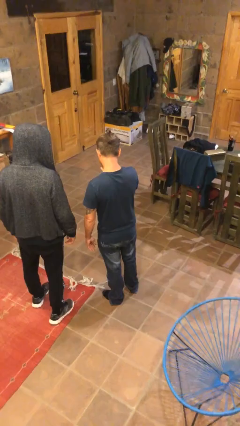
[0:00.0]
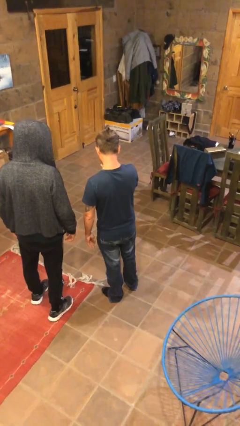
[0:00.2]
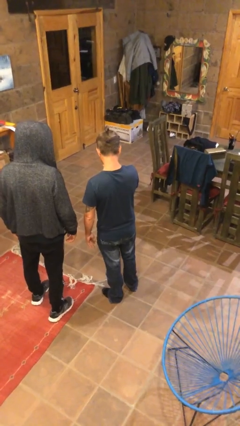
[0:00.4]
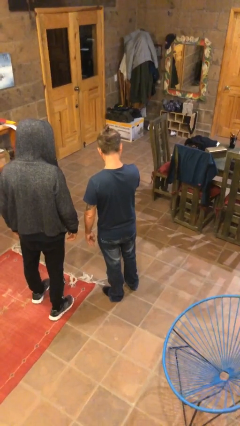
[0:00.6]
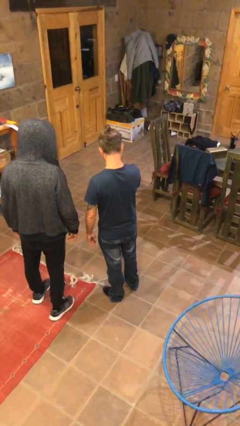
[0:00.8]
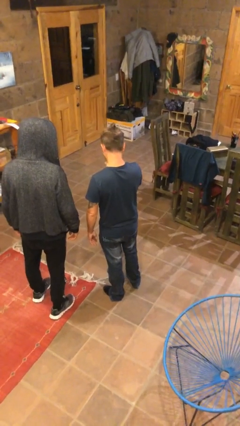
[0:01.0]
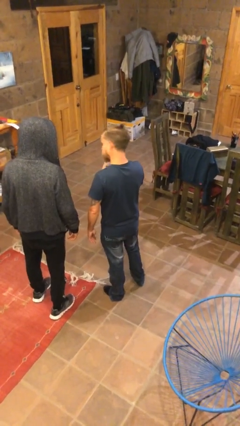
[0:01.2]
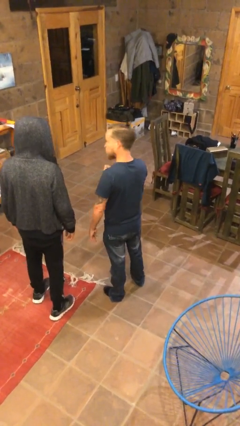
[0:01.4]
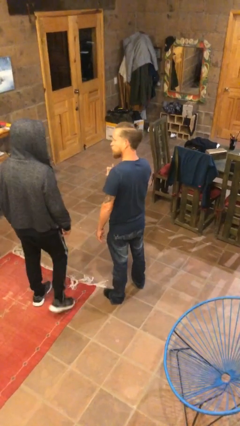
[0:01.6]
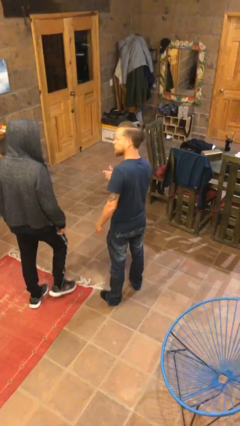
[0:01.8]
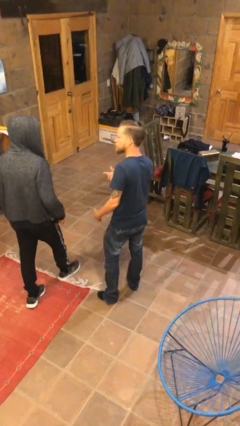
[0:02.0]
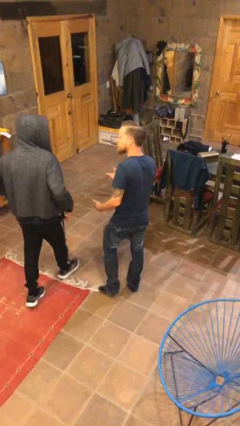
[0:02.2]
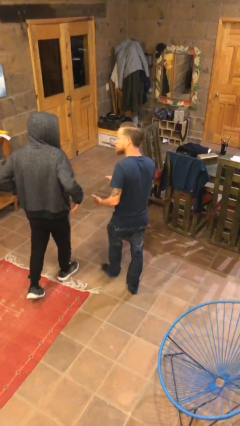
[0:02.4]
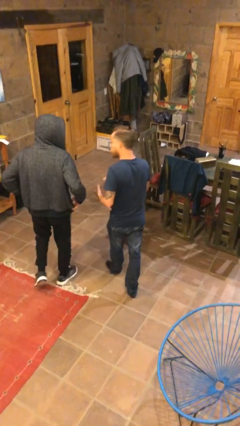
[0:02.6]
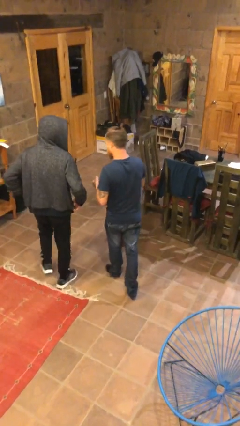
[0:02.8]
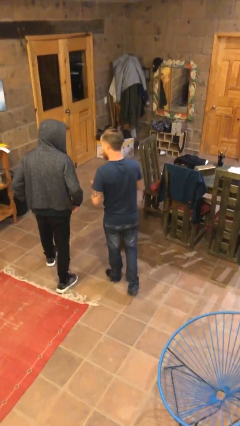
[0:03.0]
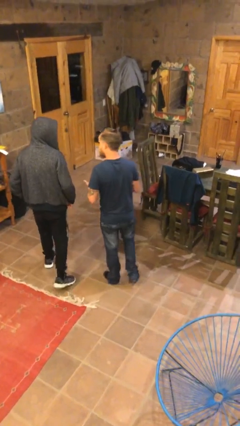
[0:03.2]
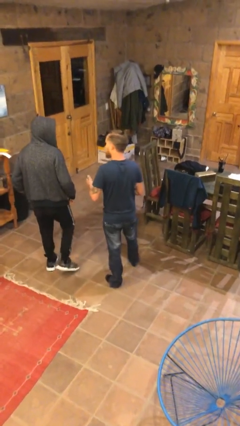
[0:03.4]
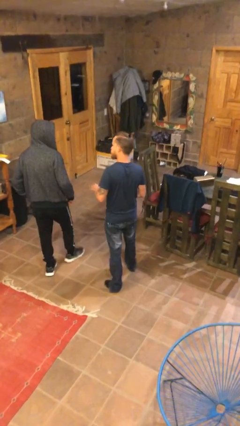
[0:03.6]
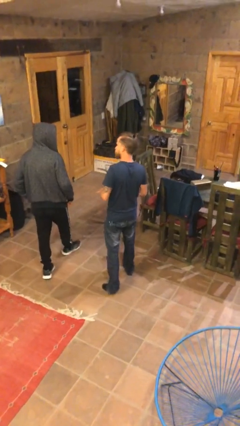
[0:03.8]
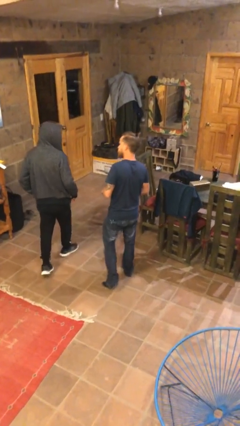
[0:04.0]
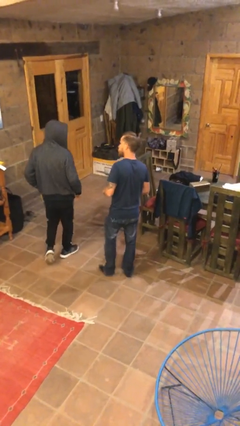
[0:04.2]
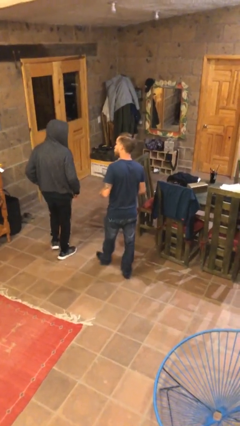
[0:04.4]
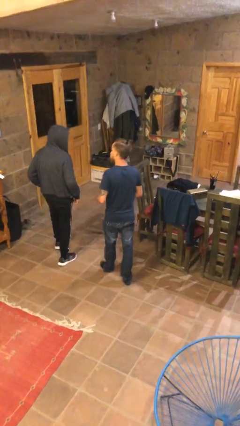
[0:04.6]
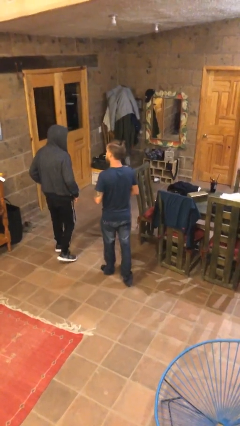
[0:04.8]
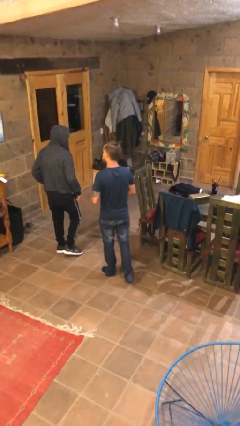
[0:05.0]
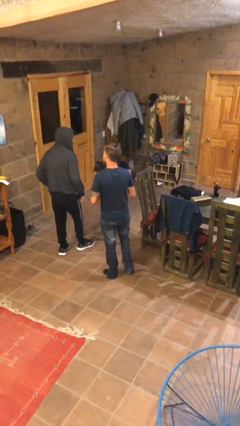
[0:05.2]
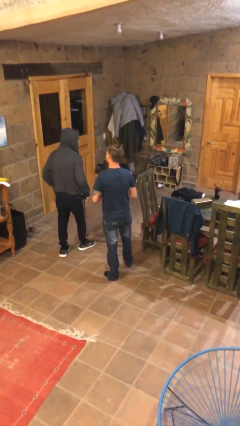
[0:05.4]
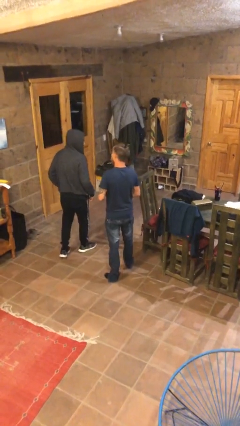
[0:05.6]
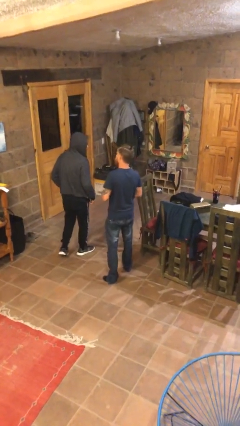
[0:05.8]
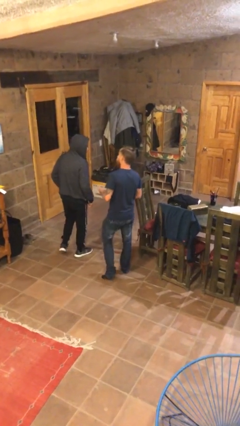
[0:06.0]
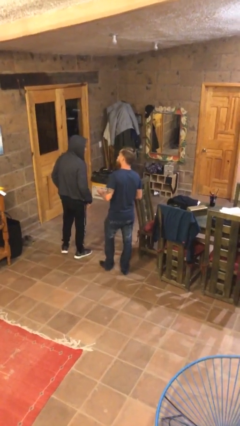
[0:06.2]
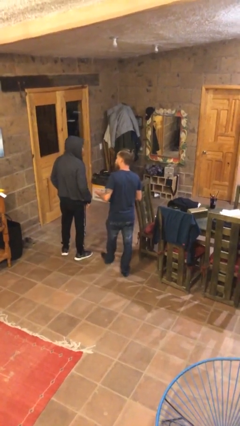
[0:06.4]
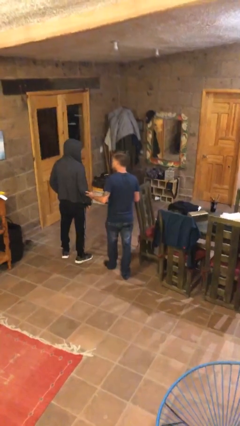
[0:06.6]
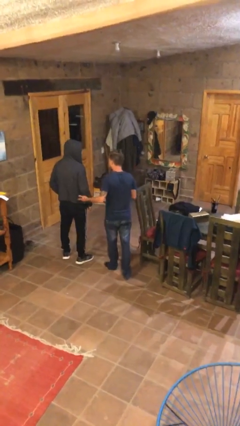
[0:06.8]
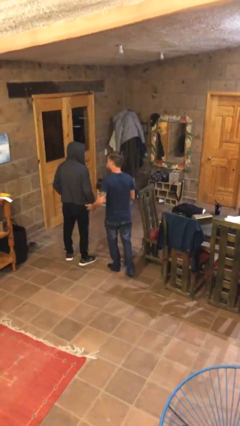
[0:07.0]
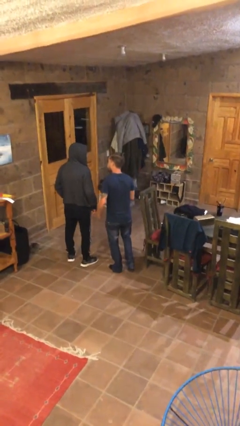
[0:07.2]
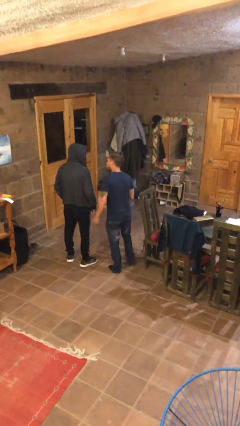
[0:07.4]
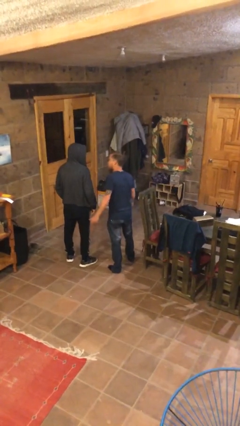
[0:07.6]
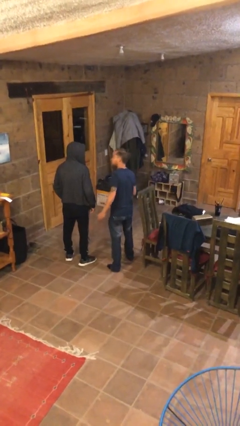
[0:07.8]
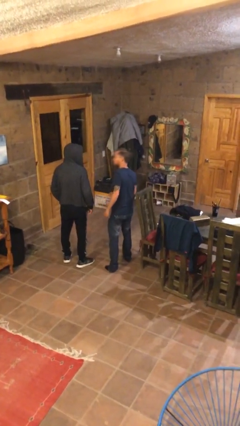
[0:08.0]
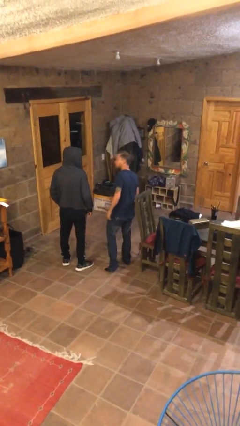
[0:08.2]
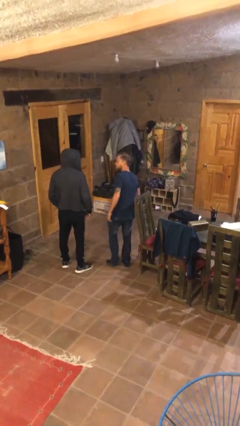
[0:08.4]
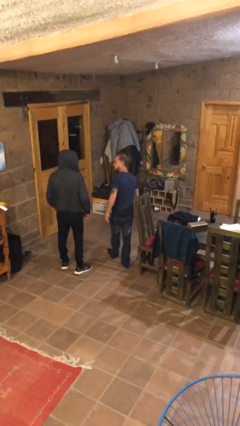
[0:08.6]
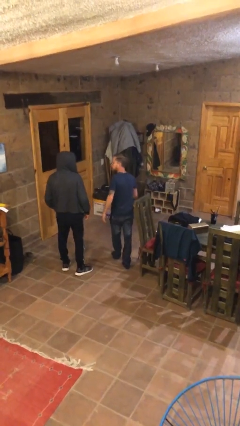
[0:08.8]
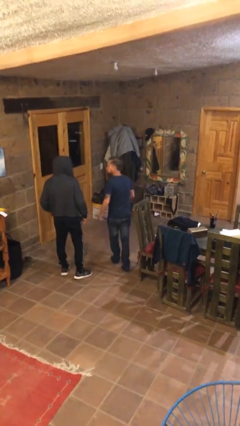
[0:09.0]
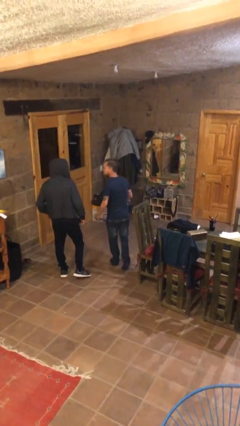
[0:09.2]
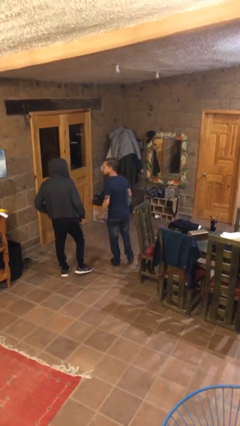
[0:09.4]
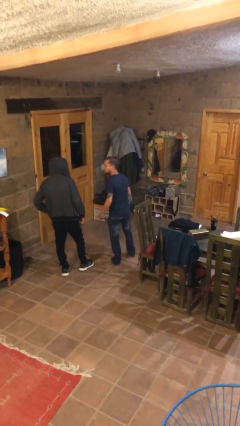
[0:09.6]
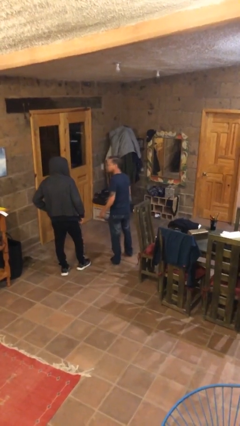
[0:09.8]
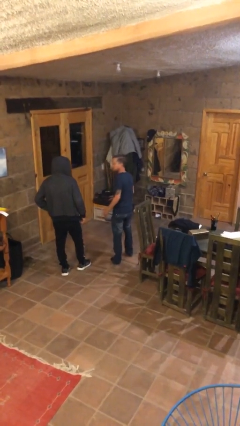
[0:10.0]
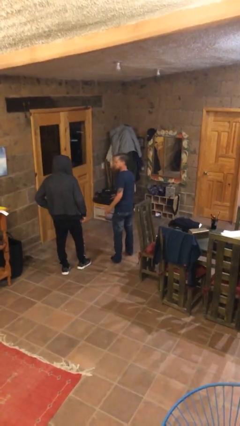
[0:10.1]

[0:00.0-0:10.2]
person talks to person

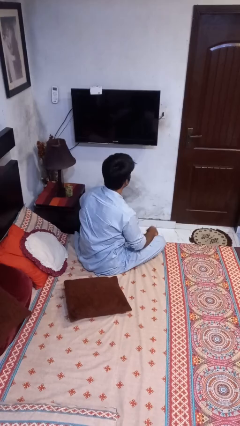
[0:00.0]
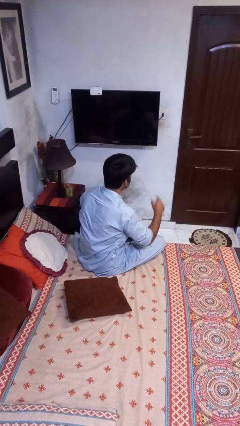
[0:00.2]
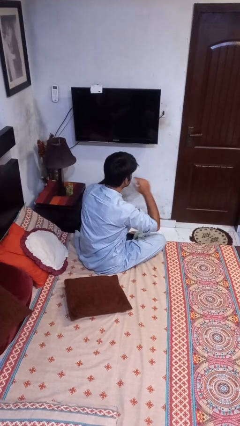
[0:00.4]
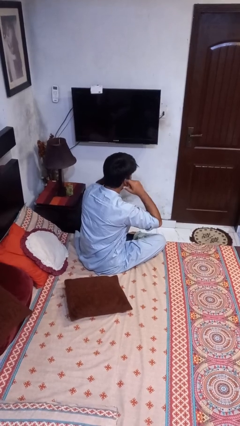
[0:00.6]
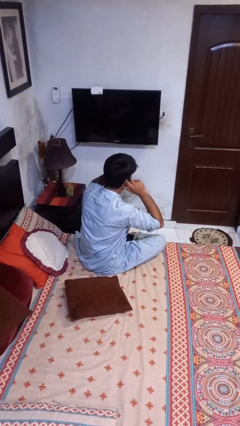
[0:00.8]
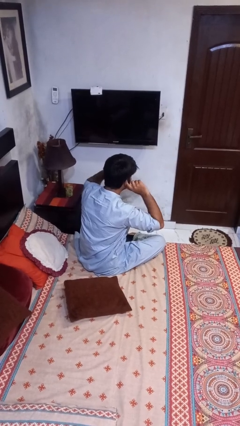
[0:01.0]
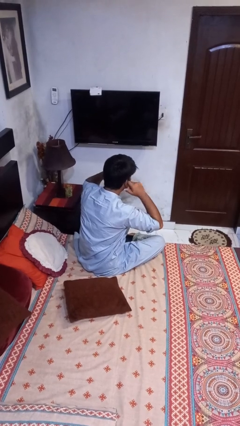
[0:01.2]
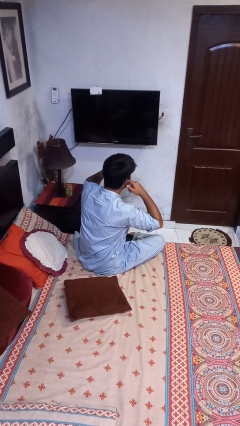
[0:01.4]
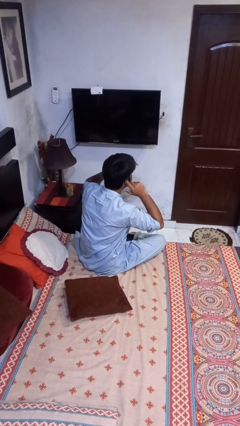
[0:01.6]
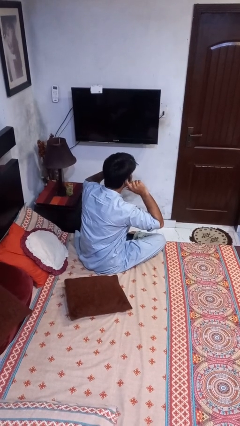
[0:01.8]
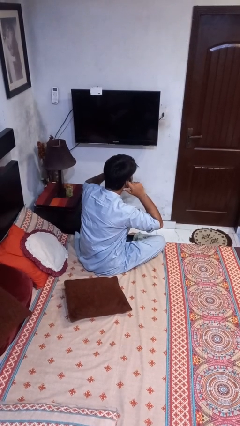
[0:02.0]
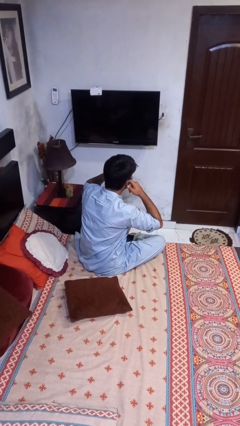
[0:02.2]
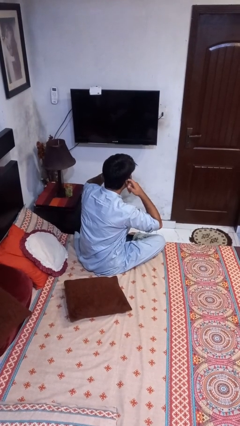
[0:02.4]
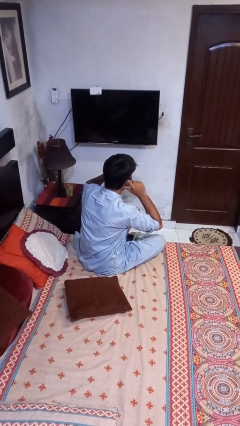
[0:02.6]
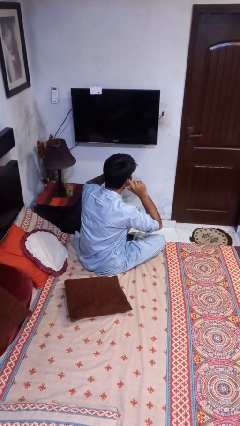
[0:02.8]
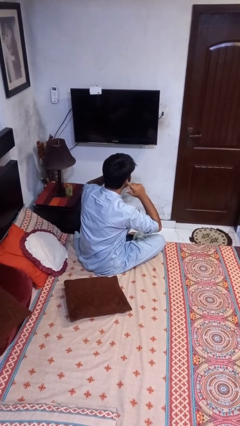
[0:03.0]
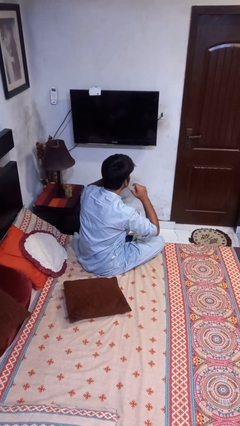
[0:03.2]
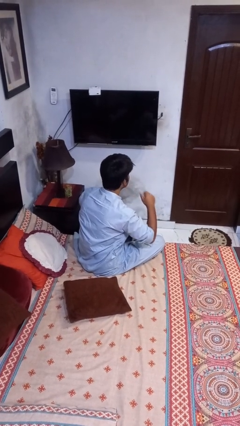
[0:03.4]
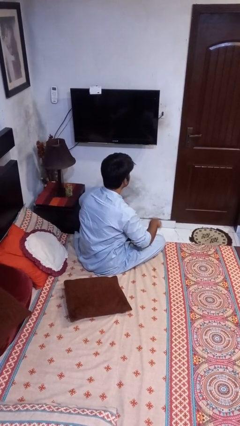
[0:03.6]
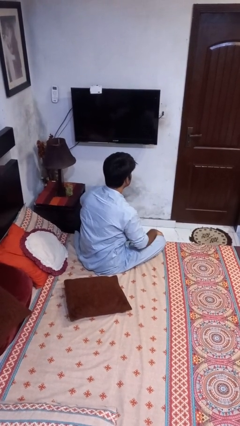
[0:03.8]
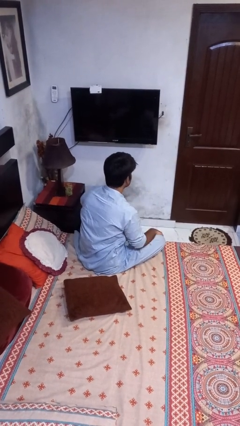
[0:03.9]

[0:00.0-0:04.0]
person puts fingers in ear

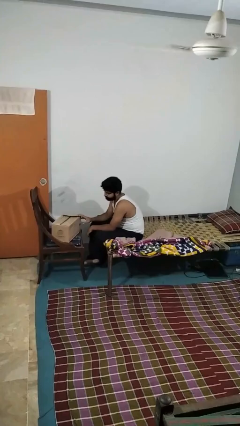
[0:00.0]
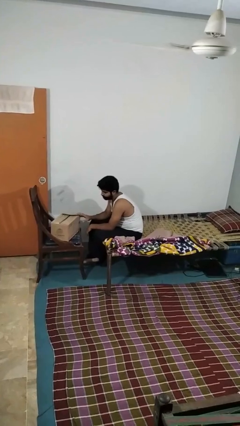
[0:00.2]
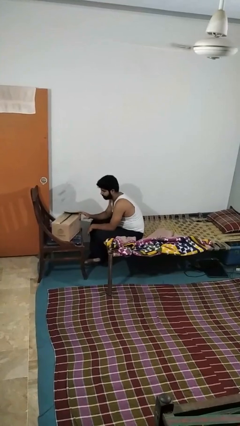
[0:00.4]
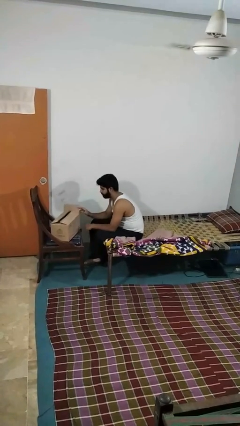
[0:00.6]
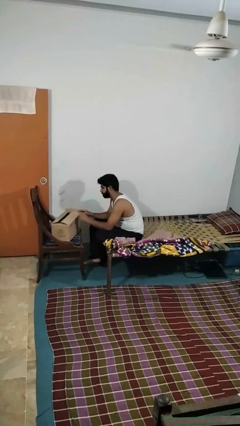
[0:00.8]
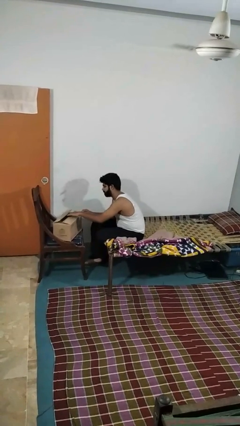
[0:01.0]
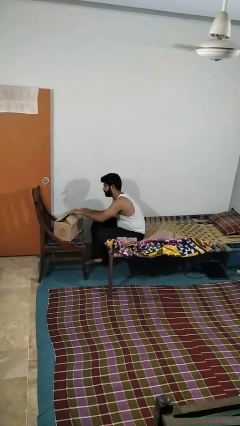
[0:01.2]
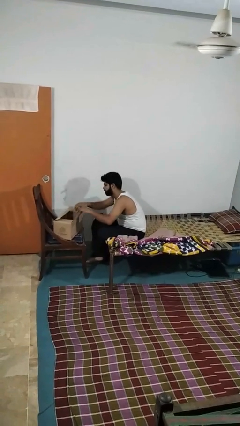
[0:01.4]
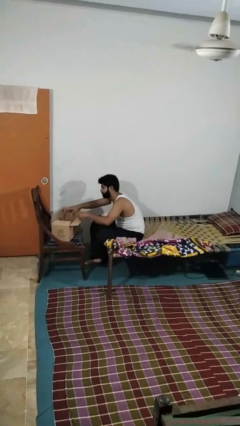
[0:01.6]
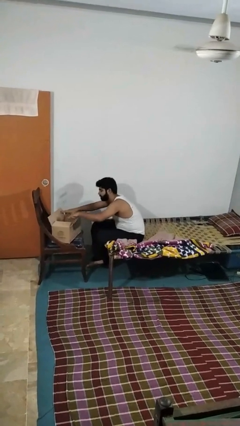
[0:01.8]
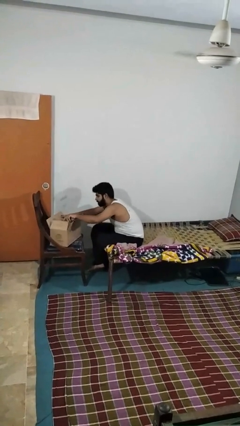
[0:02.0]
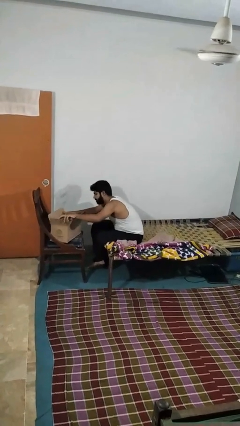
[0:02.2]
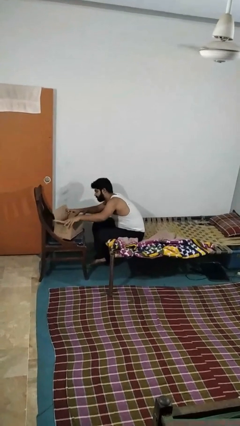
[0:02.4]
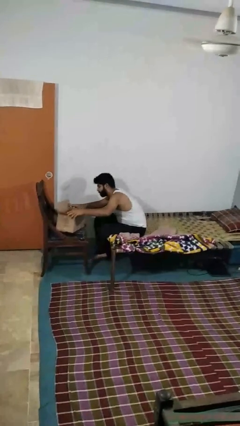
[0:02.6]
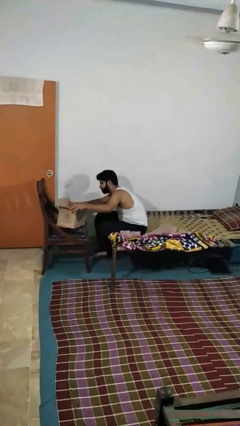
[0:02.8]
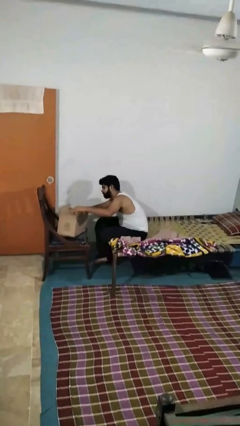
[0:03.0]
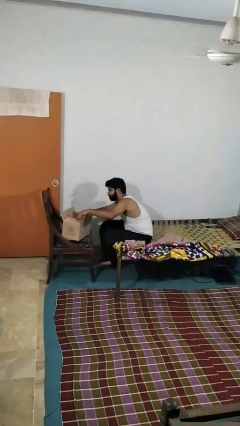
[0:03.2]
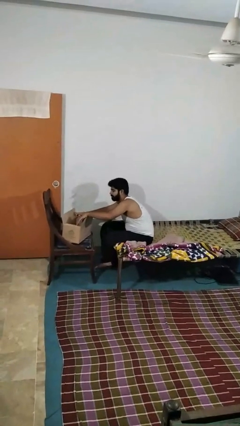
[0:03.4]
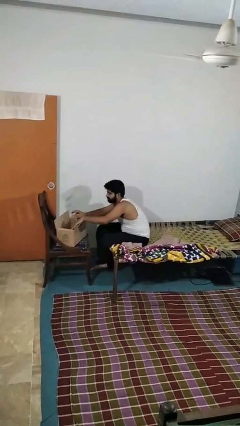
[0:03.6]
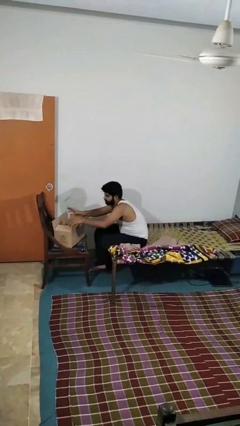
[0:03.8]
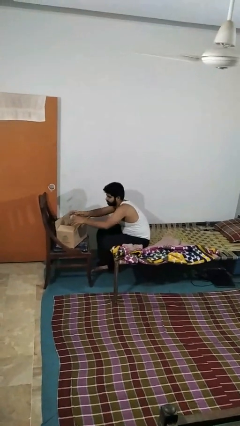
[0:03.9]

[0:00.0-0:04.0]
person opens box
